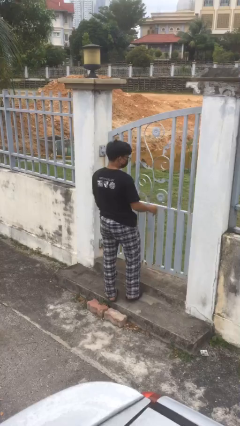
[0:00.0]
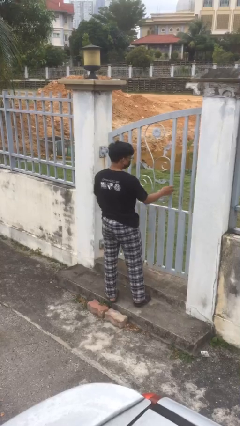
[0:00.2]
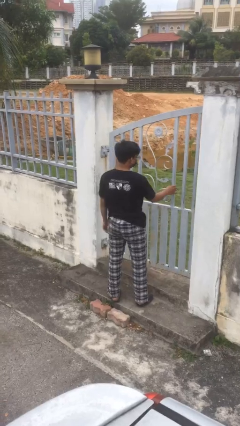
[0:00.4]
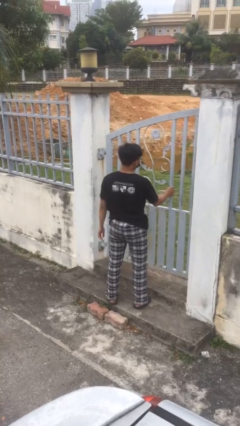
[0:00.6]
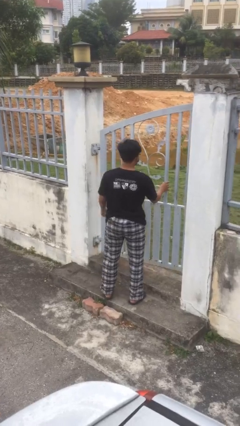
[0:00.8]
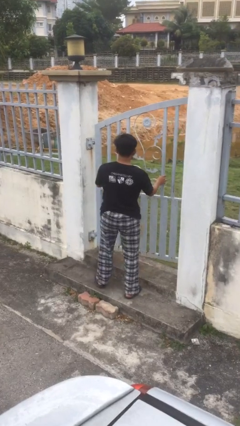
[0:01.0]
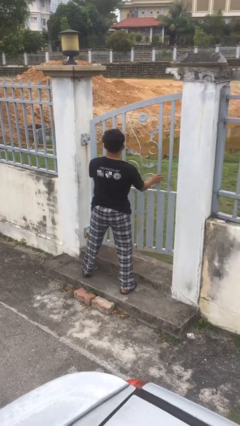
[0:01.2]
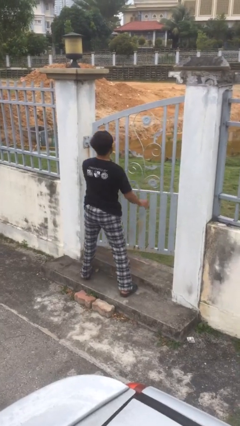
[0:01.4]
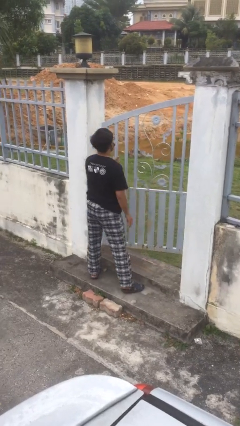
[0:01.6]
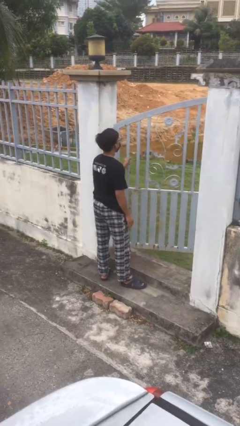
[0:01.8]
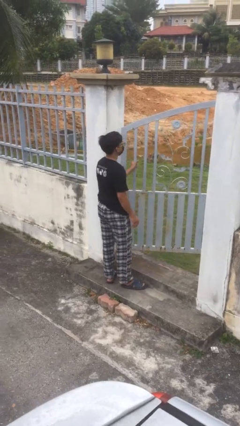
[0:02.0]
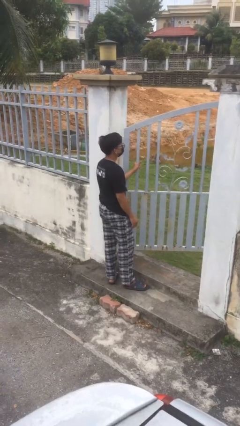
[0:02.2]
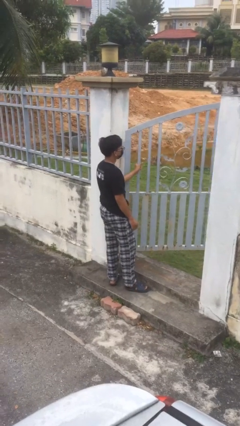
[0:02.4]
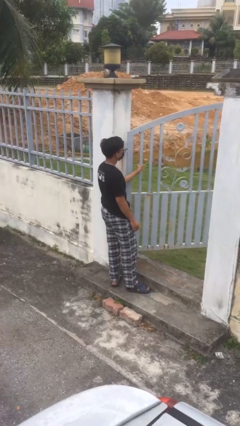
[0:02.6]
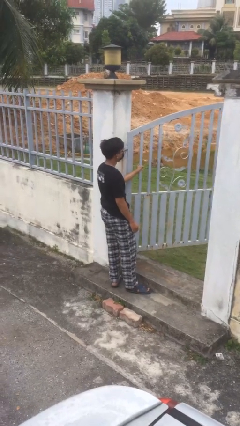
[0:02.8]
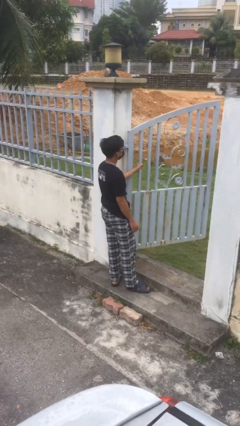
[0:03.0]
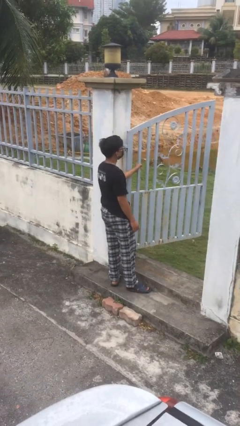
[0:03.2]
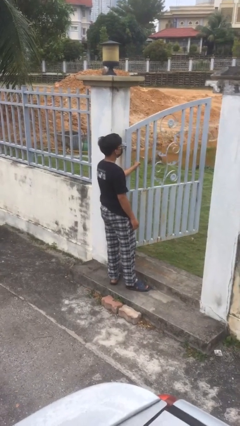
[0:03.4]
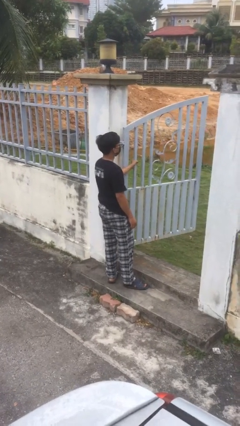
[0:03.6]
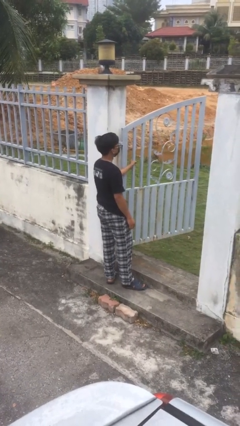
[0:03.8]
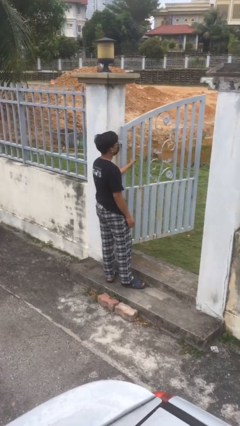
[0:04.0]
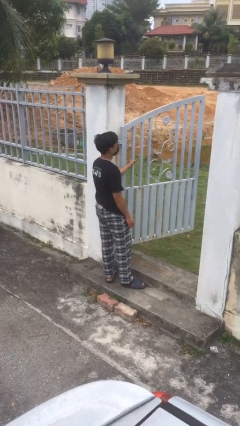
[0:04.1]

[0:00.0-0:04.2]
person opens facility door

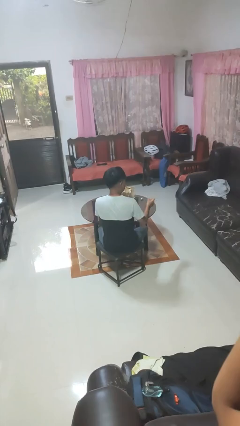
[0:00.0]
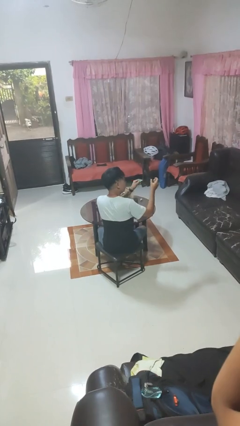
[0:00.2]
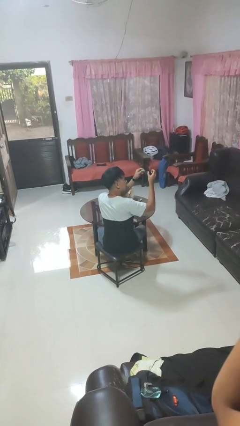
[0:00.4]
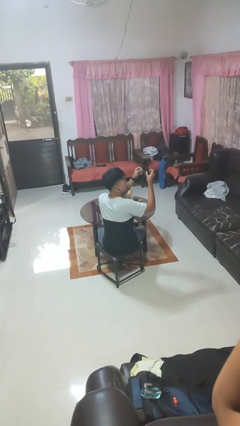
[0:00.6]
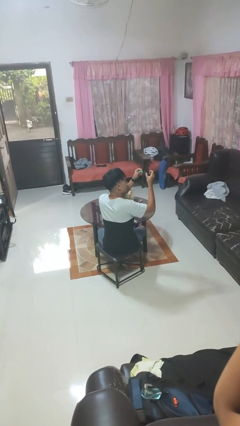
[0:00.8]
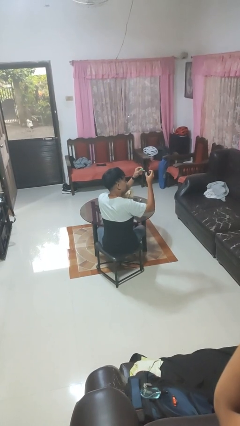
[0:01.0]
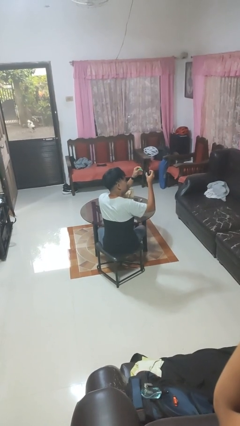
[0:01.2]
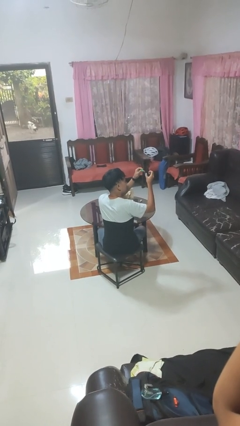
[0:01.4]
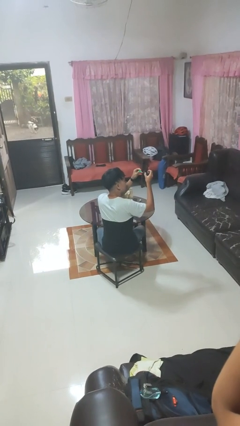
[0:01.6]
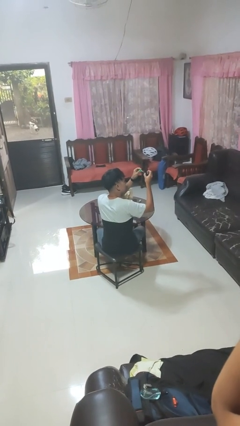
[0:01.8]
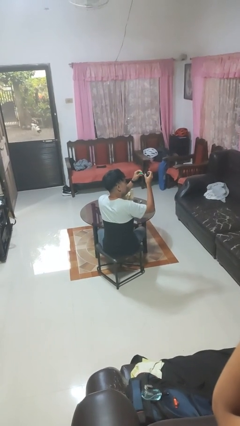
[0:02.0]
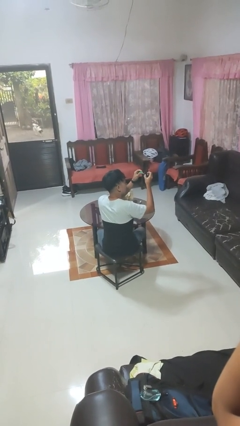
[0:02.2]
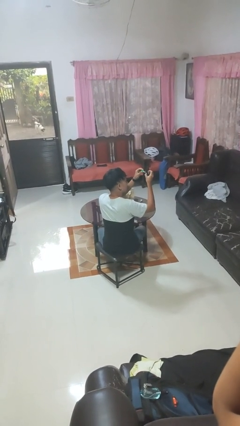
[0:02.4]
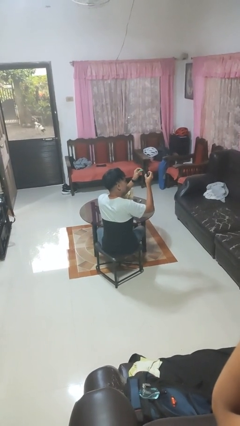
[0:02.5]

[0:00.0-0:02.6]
person paints fingernails

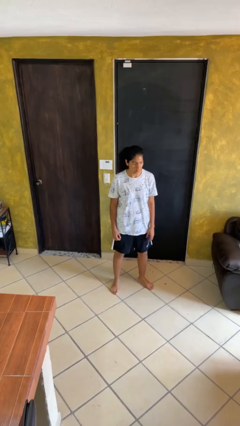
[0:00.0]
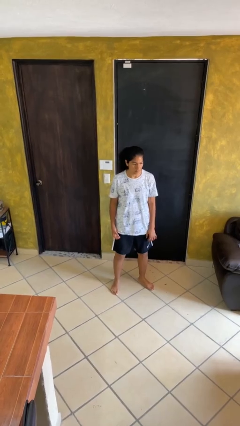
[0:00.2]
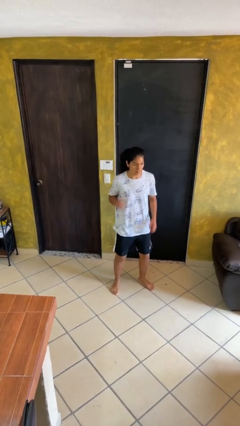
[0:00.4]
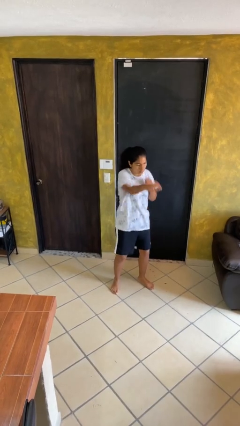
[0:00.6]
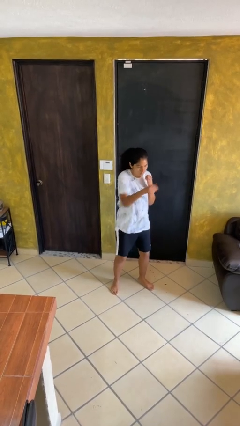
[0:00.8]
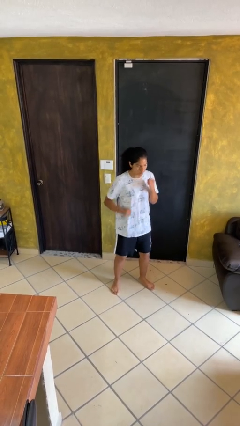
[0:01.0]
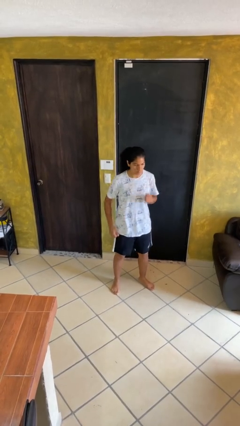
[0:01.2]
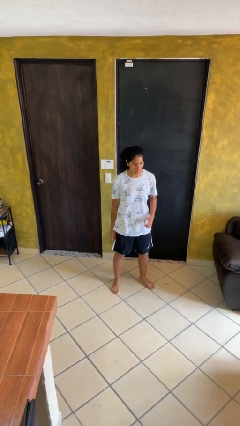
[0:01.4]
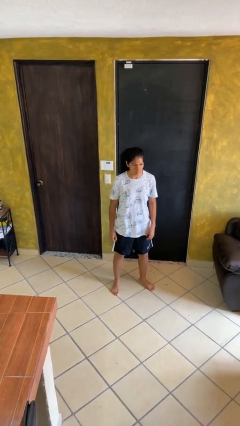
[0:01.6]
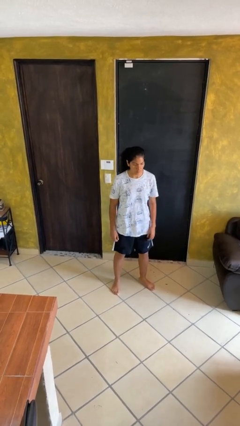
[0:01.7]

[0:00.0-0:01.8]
person punches

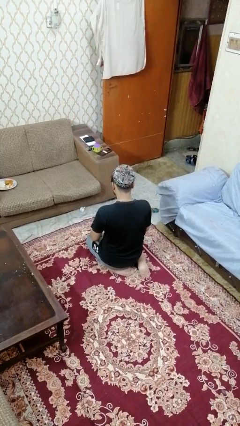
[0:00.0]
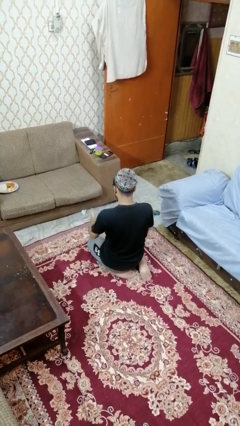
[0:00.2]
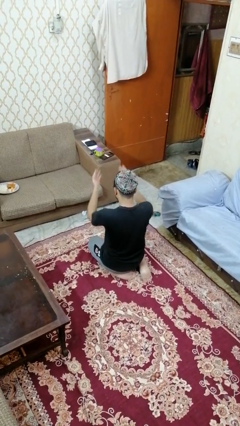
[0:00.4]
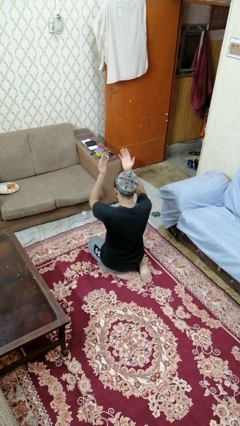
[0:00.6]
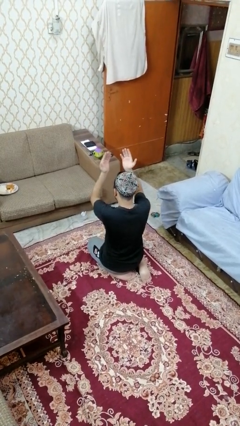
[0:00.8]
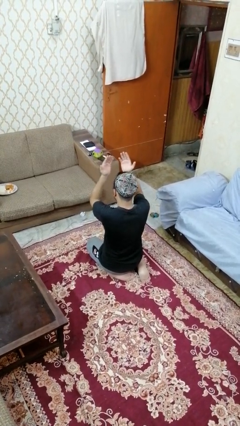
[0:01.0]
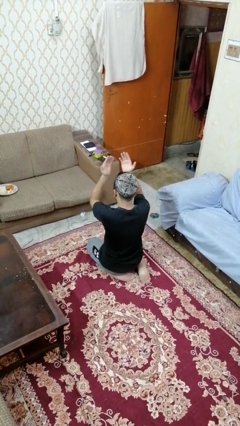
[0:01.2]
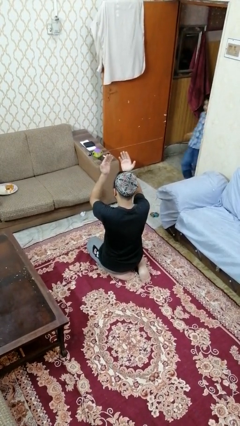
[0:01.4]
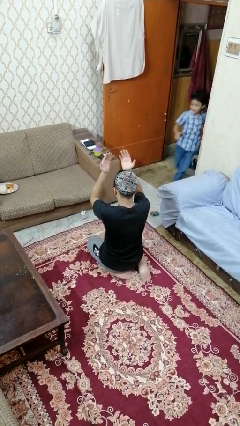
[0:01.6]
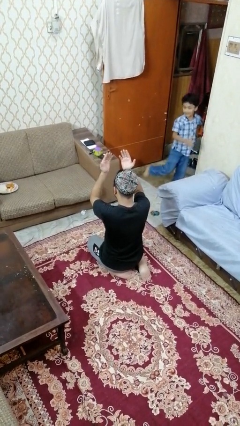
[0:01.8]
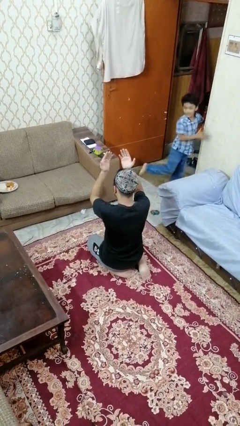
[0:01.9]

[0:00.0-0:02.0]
person prays

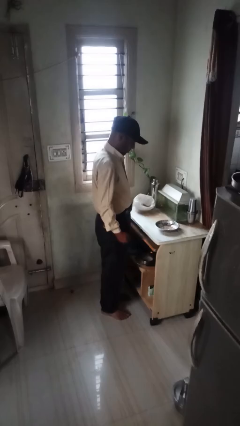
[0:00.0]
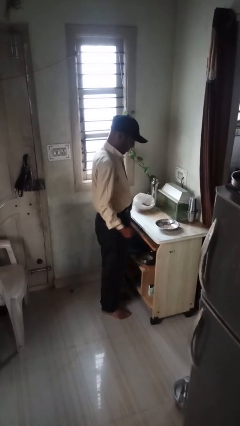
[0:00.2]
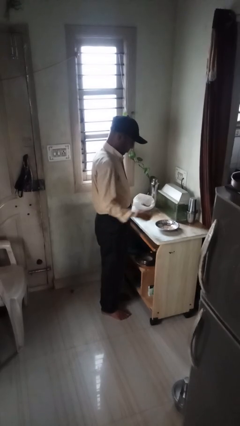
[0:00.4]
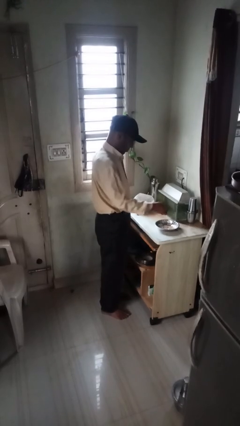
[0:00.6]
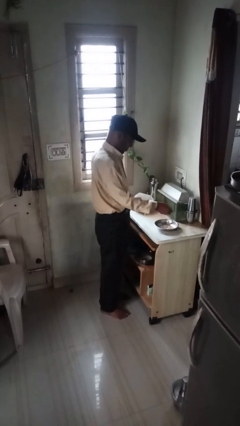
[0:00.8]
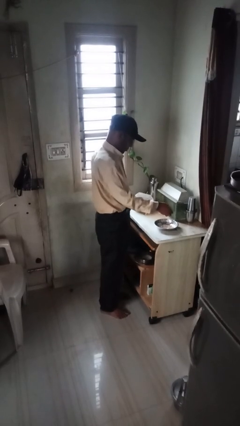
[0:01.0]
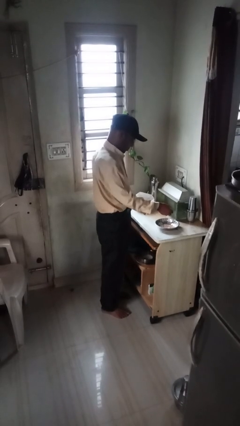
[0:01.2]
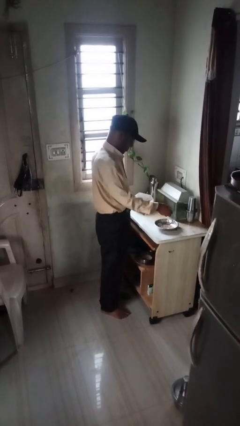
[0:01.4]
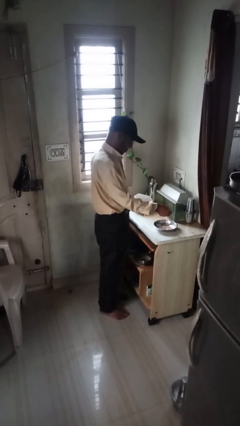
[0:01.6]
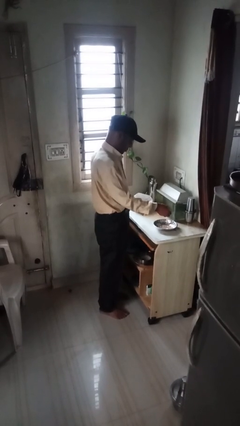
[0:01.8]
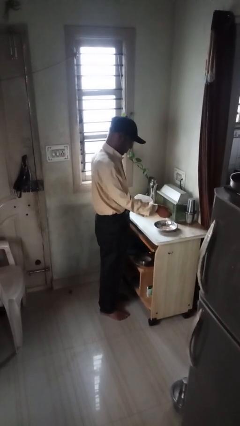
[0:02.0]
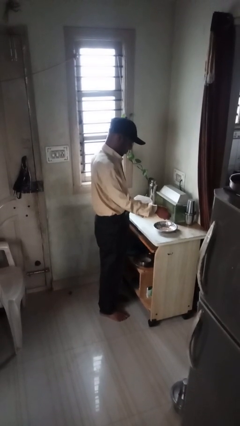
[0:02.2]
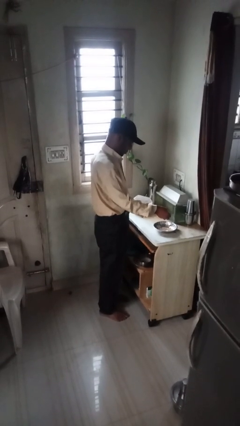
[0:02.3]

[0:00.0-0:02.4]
person pours into bowl

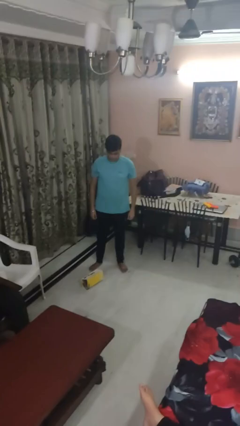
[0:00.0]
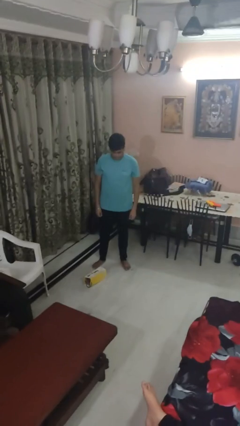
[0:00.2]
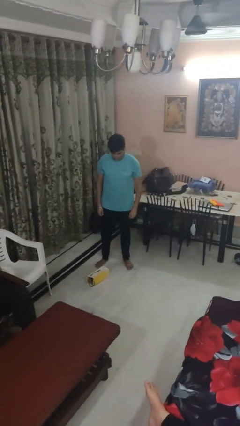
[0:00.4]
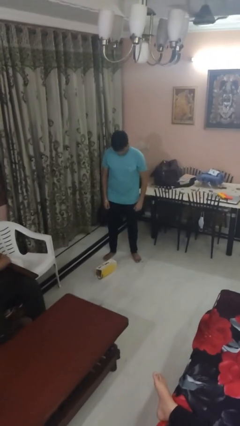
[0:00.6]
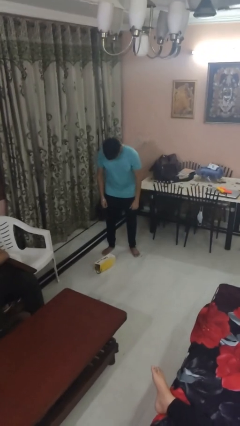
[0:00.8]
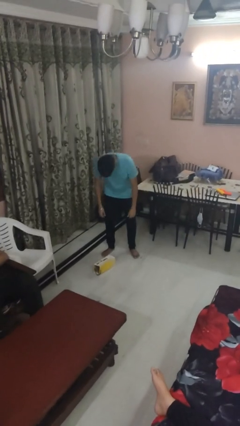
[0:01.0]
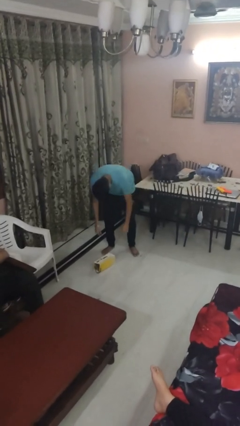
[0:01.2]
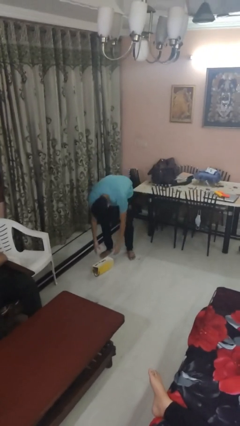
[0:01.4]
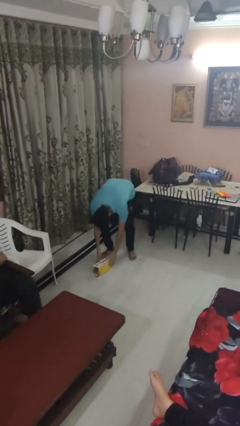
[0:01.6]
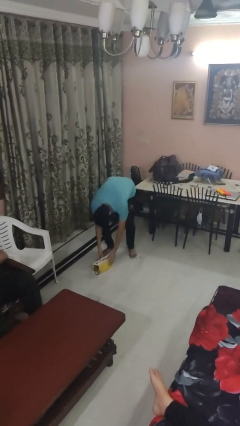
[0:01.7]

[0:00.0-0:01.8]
person drops object

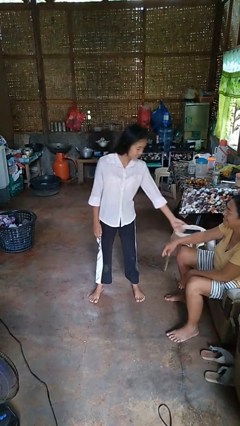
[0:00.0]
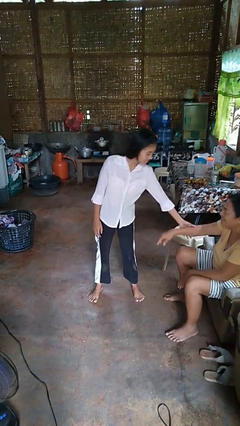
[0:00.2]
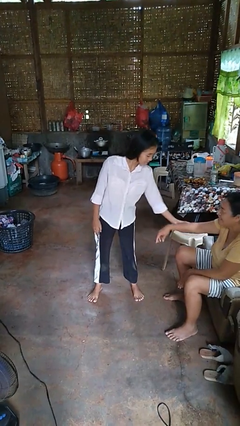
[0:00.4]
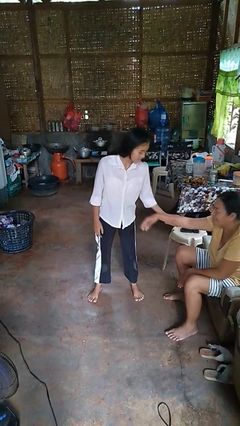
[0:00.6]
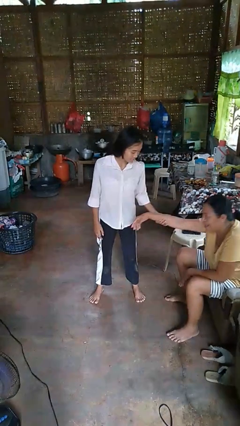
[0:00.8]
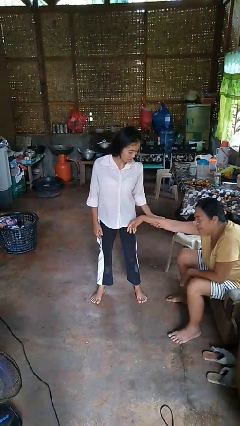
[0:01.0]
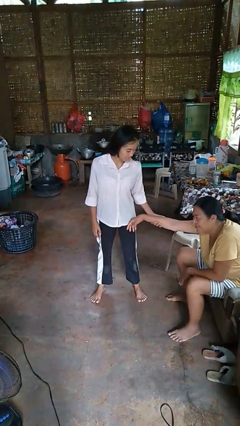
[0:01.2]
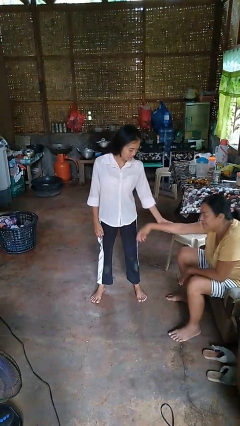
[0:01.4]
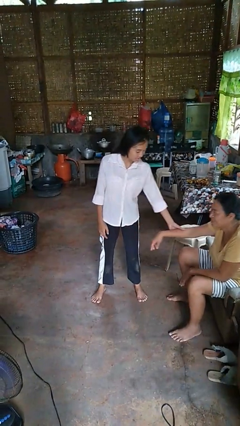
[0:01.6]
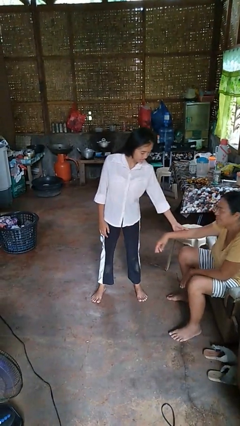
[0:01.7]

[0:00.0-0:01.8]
person grabs person by forearm

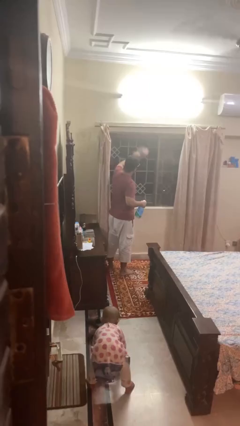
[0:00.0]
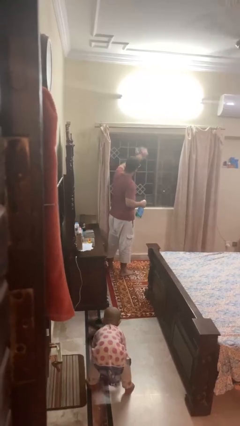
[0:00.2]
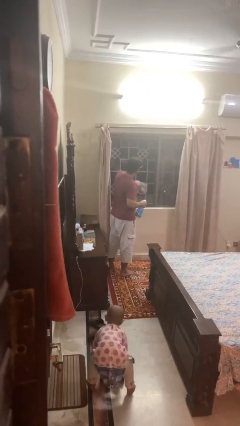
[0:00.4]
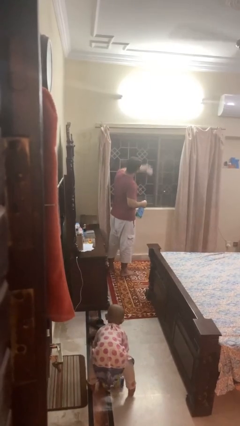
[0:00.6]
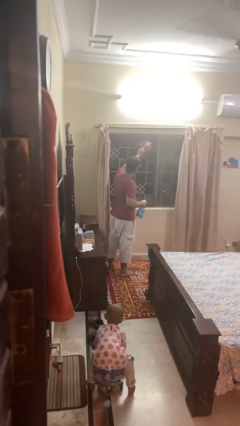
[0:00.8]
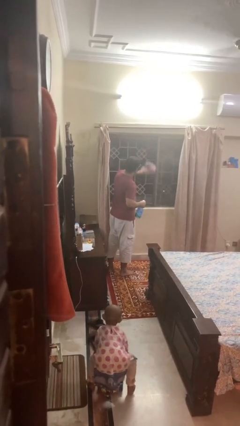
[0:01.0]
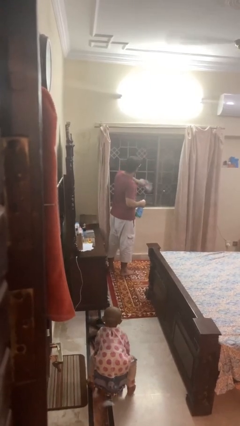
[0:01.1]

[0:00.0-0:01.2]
person washes window
